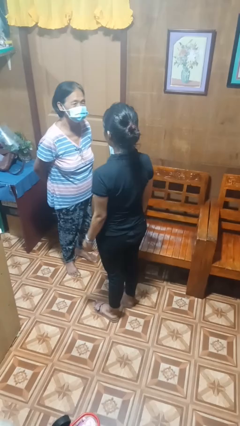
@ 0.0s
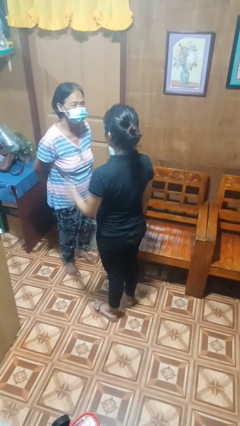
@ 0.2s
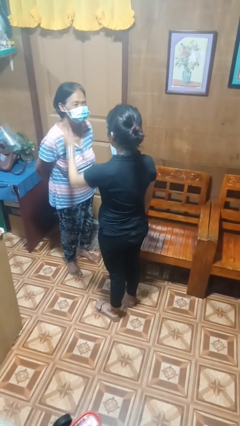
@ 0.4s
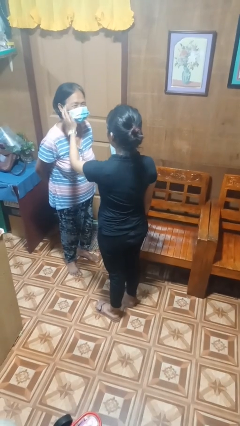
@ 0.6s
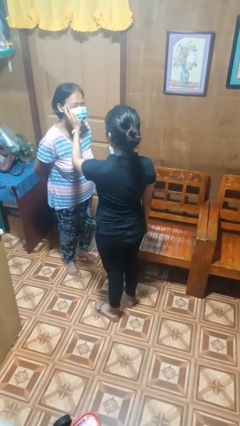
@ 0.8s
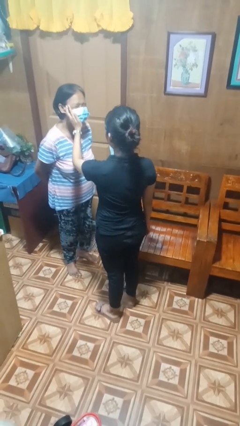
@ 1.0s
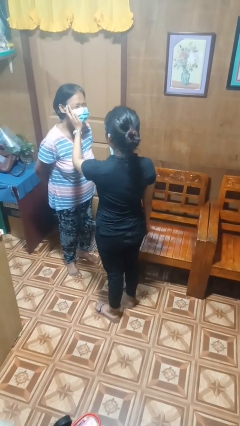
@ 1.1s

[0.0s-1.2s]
person touches face of person

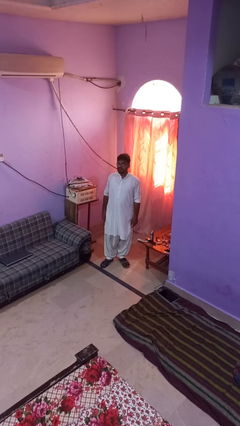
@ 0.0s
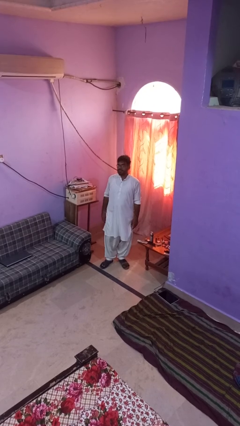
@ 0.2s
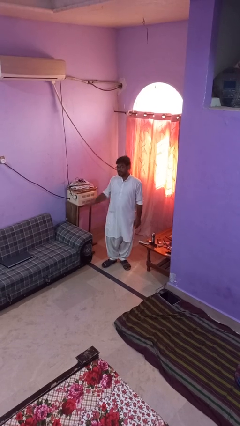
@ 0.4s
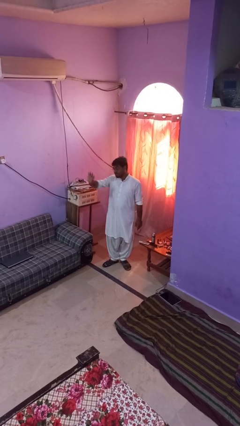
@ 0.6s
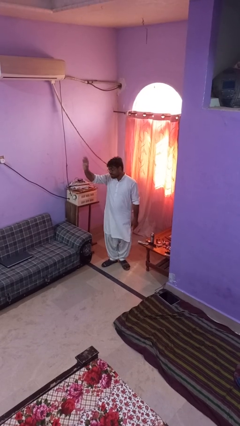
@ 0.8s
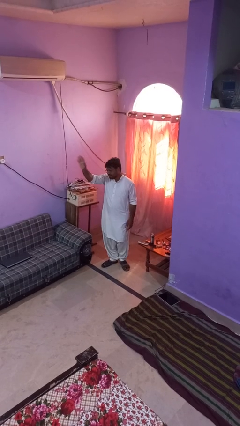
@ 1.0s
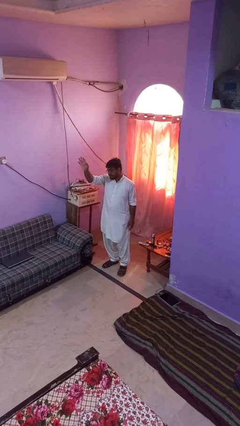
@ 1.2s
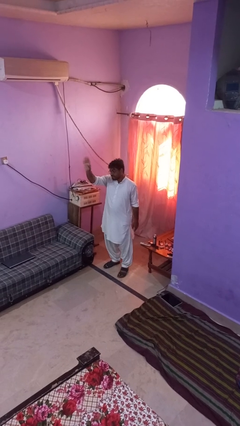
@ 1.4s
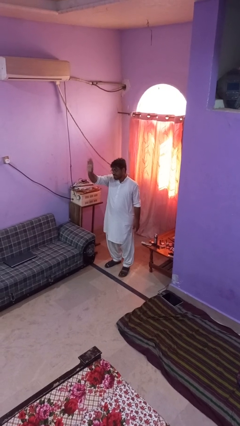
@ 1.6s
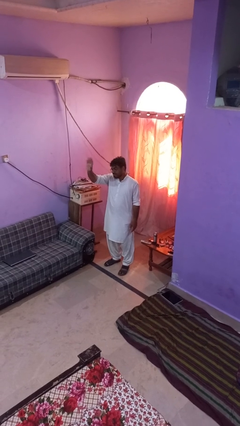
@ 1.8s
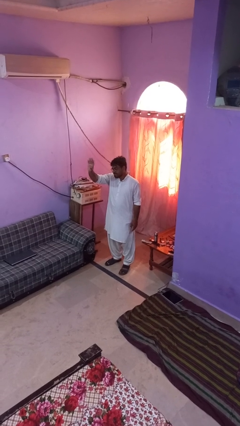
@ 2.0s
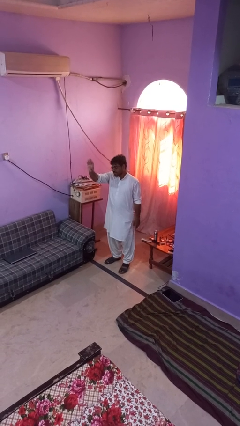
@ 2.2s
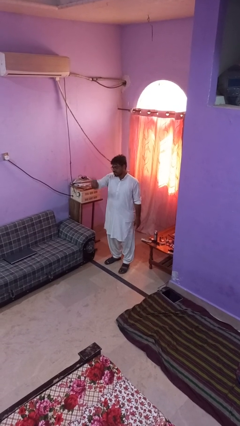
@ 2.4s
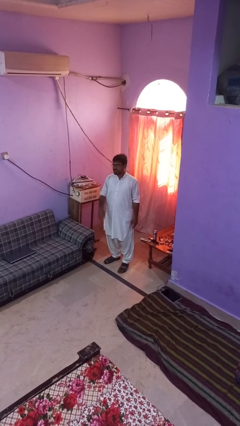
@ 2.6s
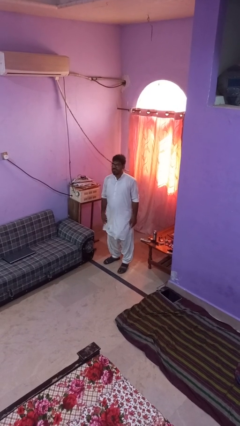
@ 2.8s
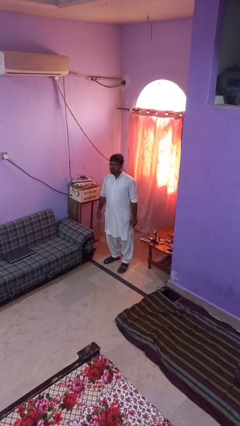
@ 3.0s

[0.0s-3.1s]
person waves at person

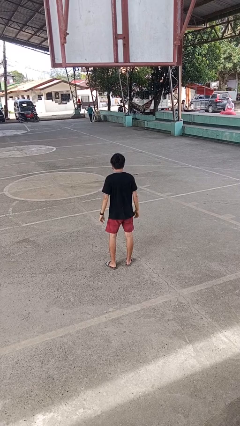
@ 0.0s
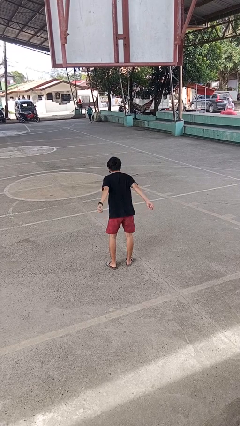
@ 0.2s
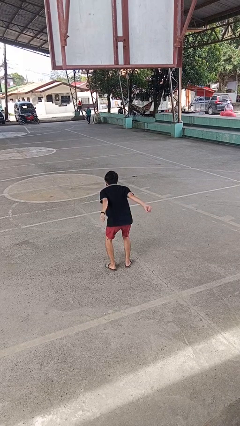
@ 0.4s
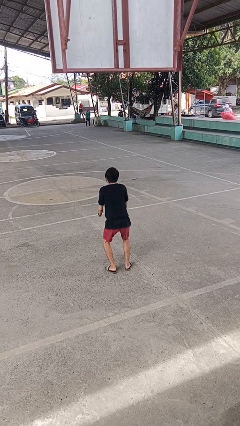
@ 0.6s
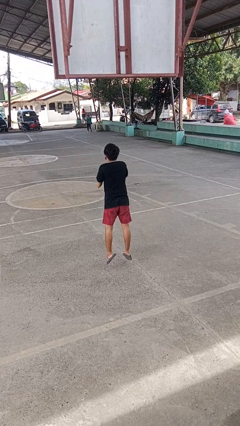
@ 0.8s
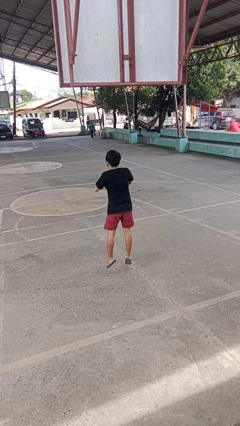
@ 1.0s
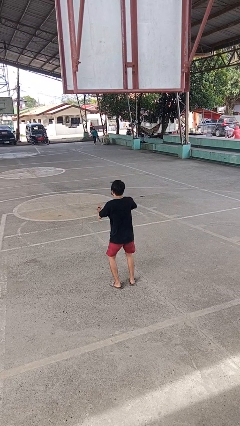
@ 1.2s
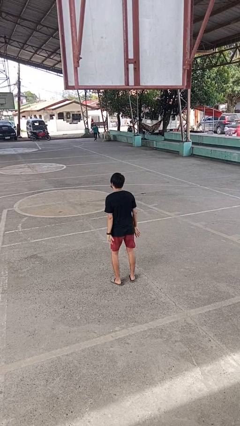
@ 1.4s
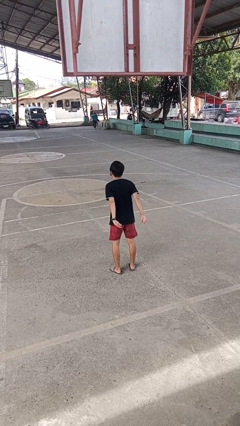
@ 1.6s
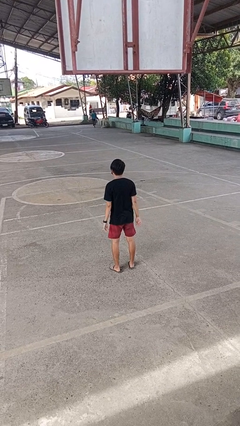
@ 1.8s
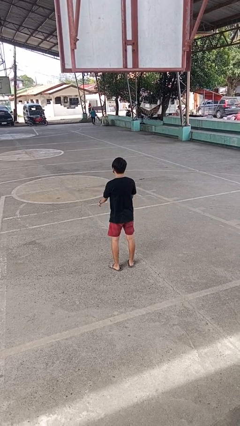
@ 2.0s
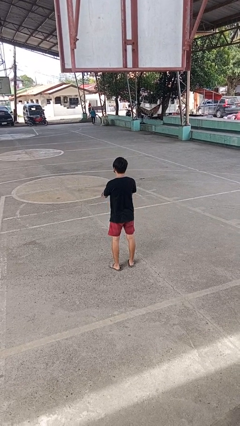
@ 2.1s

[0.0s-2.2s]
person jumps

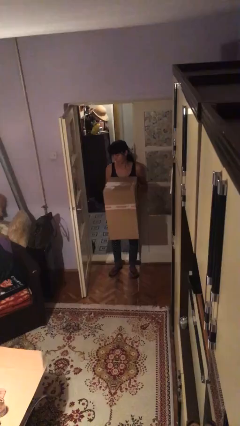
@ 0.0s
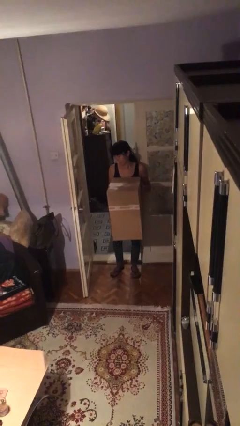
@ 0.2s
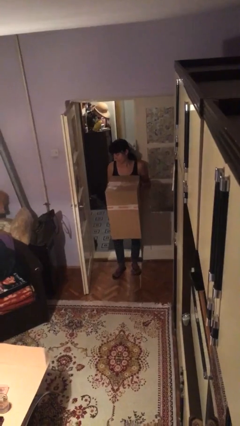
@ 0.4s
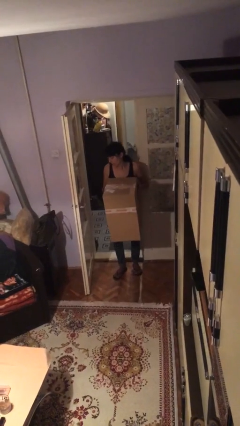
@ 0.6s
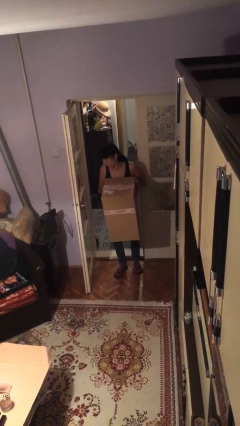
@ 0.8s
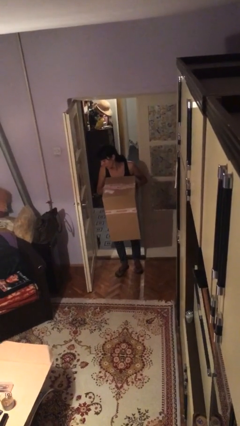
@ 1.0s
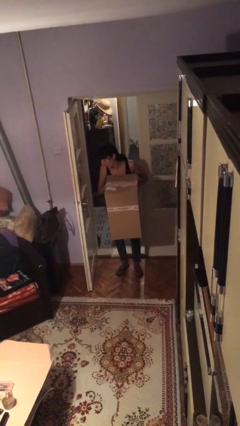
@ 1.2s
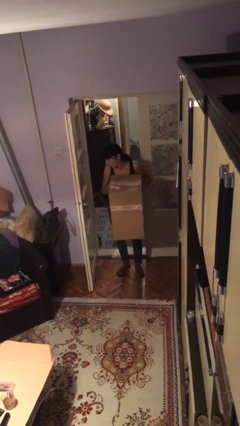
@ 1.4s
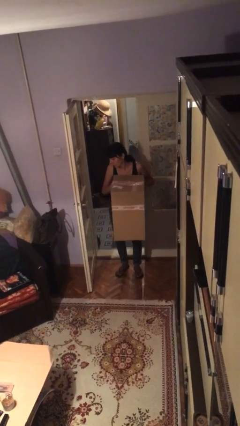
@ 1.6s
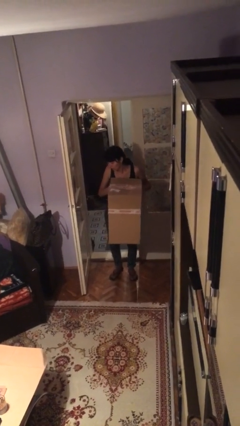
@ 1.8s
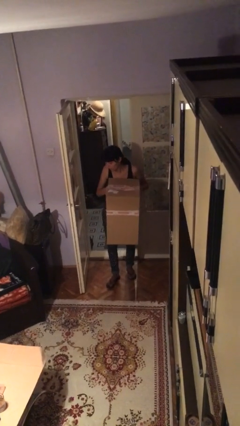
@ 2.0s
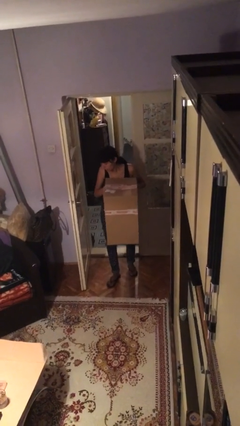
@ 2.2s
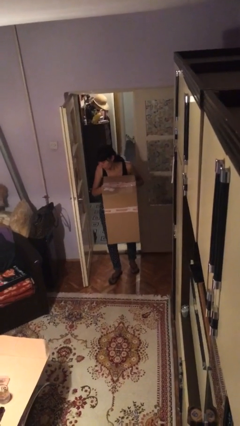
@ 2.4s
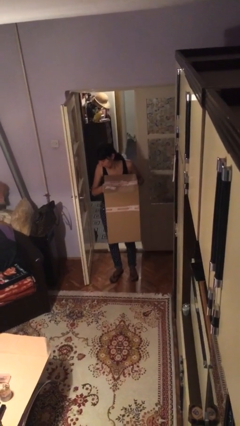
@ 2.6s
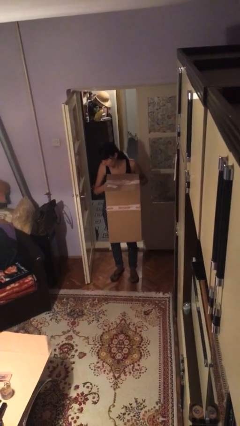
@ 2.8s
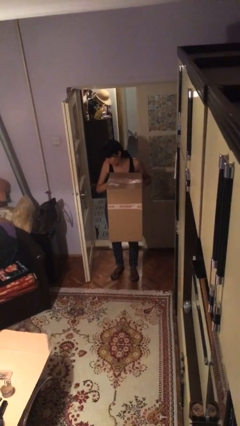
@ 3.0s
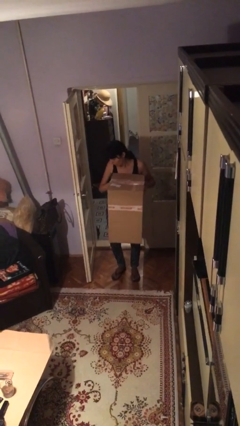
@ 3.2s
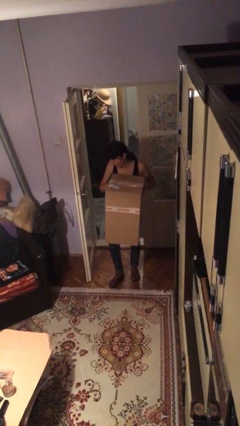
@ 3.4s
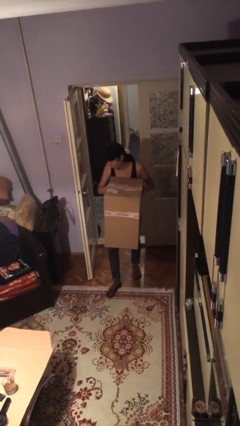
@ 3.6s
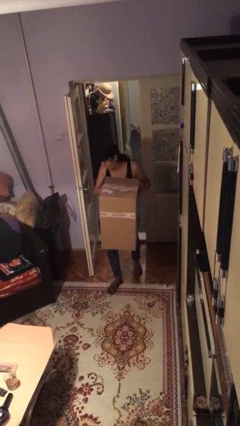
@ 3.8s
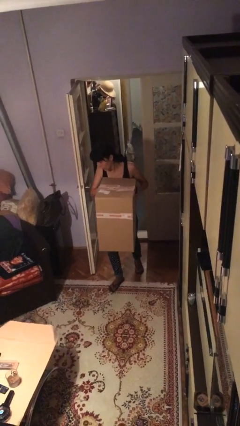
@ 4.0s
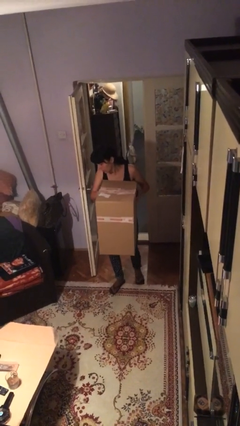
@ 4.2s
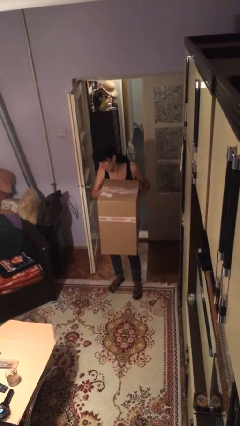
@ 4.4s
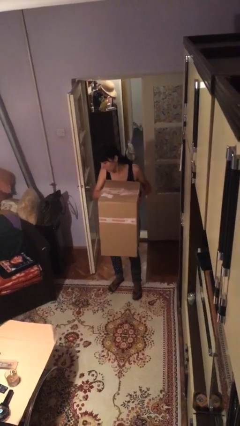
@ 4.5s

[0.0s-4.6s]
person carries heavy object

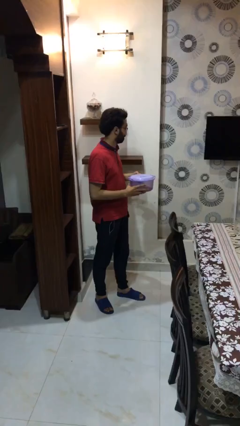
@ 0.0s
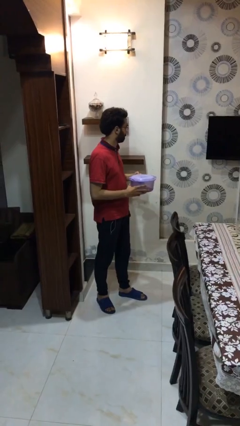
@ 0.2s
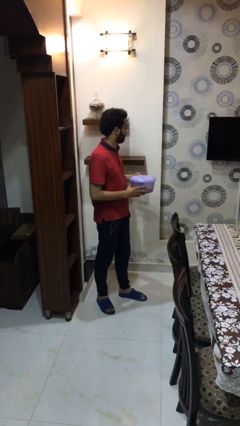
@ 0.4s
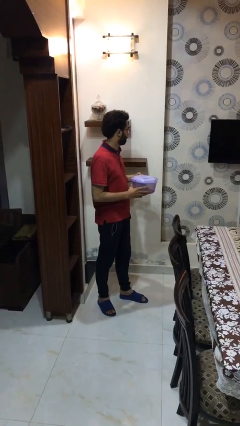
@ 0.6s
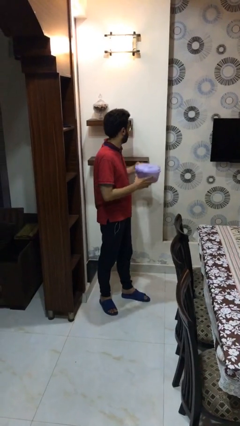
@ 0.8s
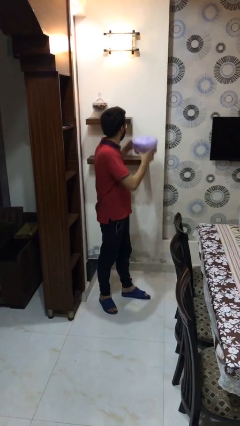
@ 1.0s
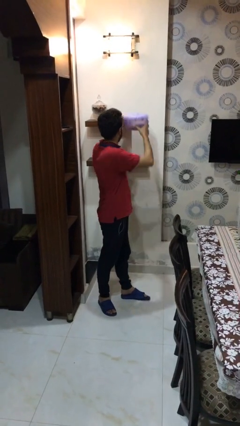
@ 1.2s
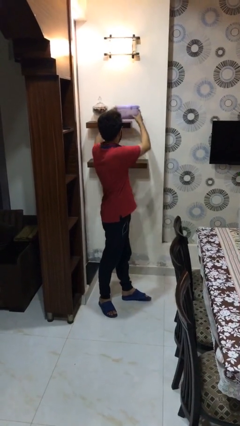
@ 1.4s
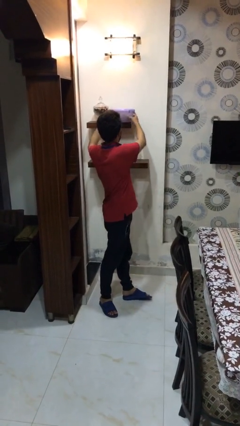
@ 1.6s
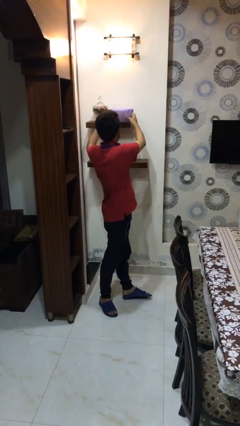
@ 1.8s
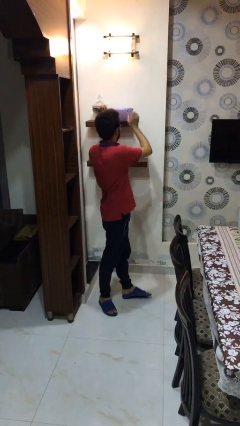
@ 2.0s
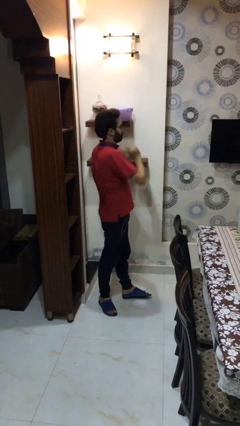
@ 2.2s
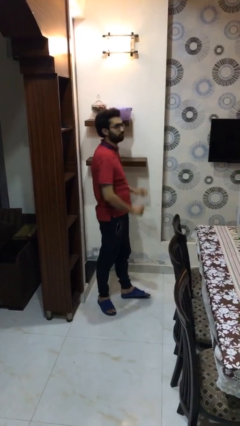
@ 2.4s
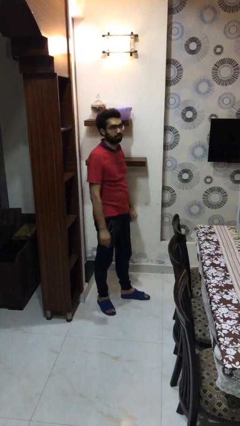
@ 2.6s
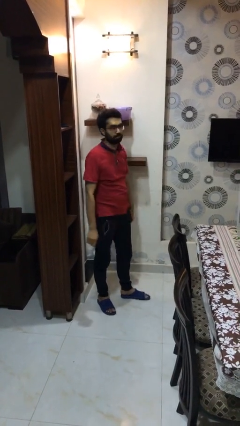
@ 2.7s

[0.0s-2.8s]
person puts down object on shelf

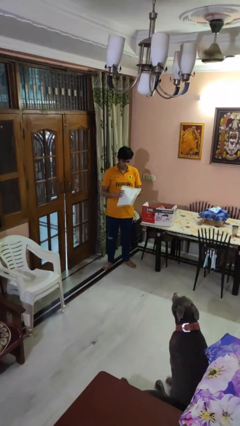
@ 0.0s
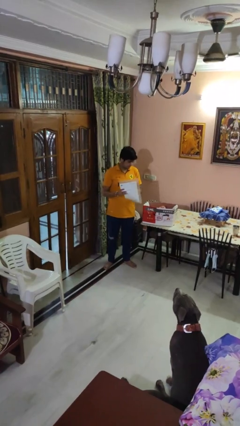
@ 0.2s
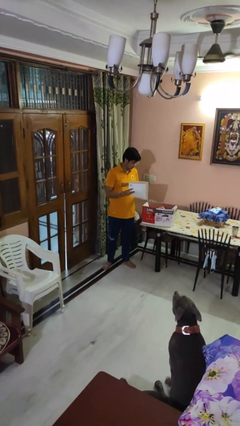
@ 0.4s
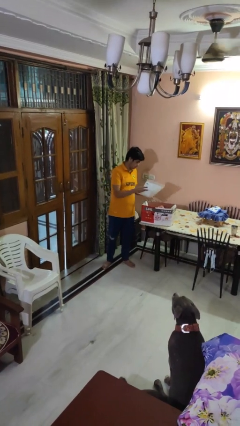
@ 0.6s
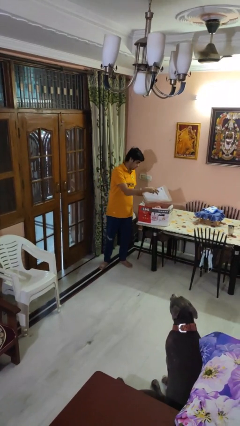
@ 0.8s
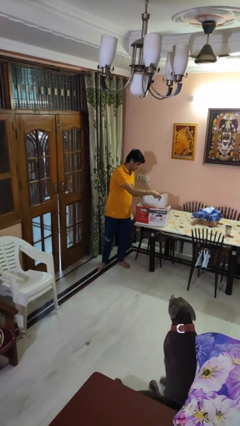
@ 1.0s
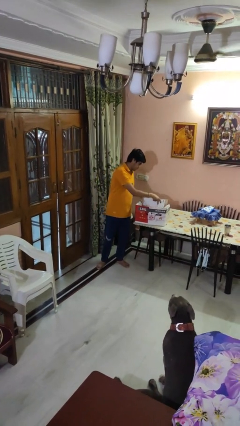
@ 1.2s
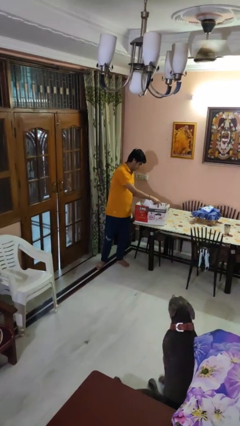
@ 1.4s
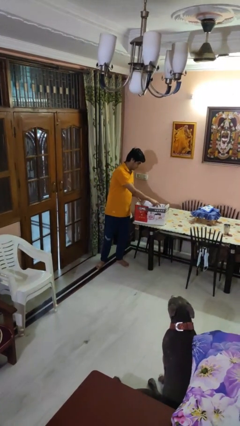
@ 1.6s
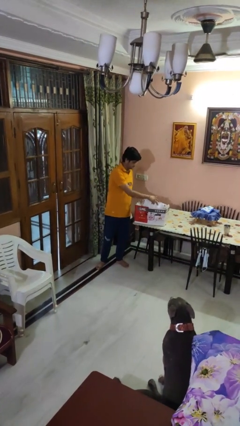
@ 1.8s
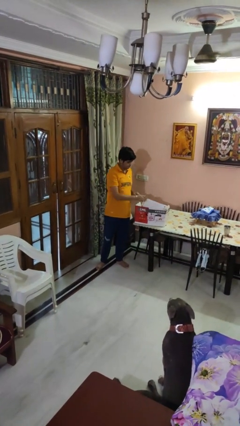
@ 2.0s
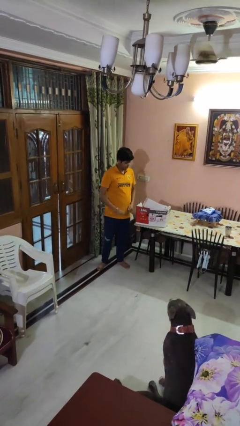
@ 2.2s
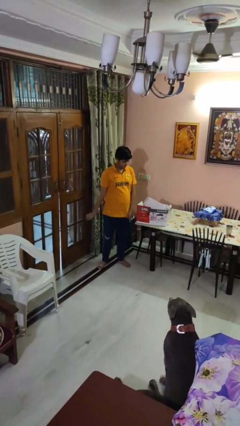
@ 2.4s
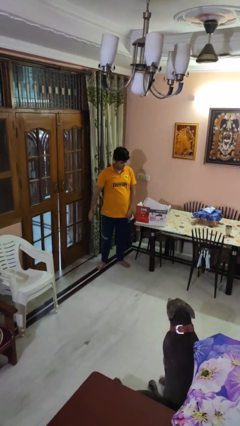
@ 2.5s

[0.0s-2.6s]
person puts object into box

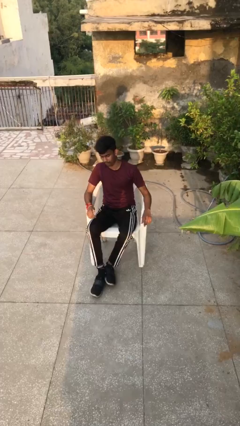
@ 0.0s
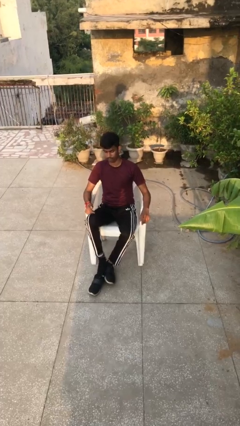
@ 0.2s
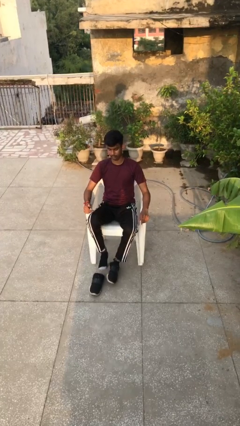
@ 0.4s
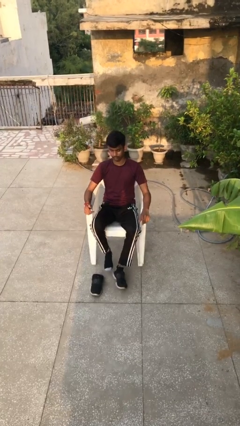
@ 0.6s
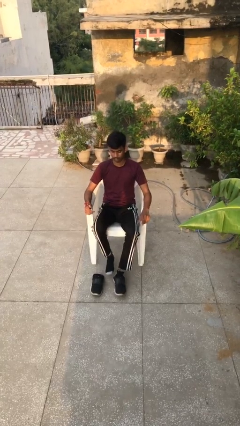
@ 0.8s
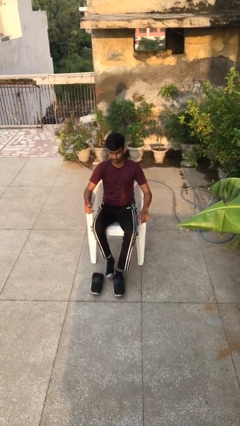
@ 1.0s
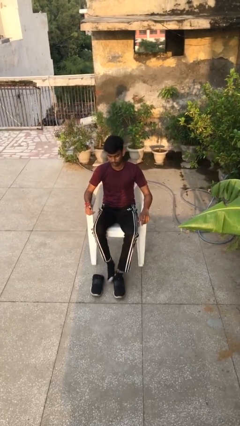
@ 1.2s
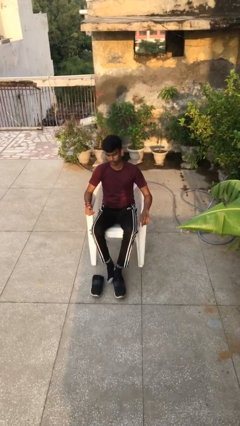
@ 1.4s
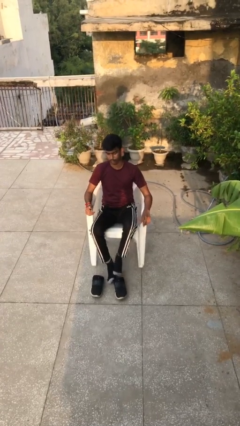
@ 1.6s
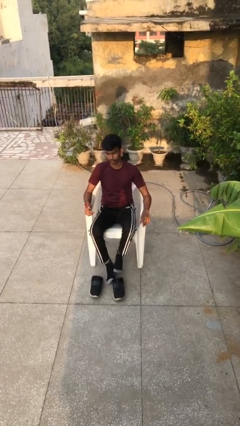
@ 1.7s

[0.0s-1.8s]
person takes off shoes
